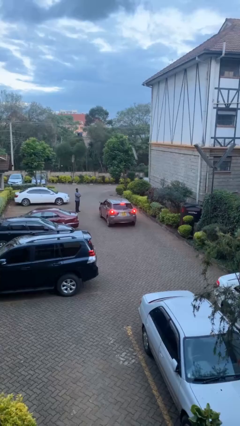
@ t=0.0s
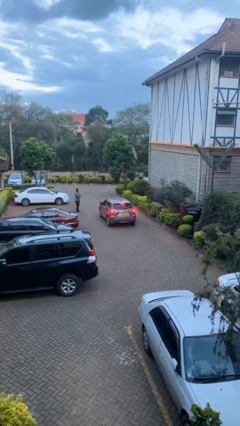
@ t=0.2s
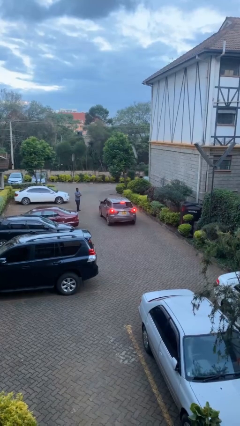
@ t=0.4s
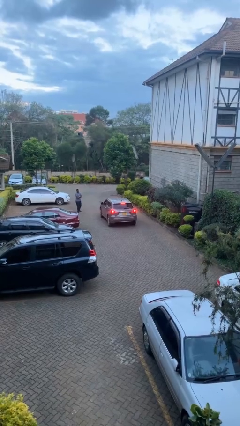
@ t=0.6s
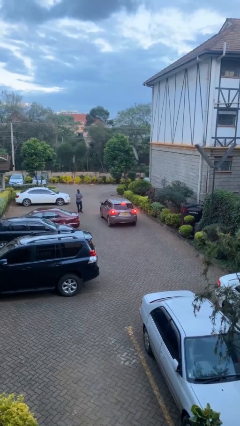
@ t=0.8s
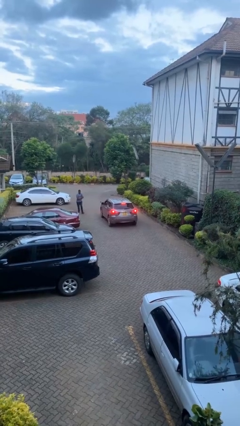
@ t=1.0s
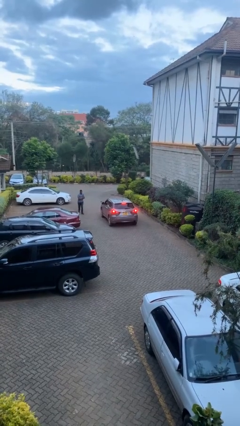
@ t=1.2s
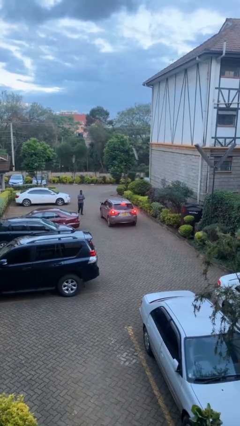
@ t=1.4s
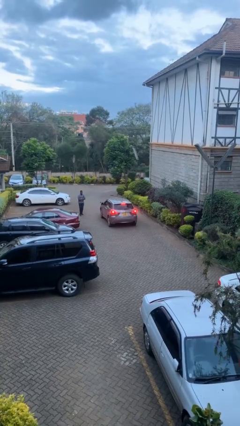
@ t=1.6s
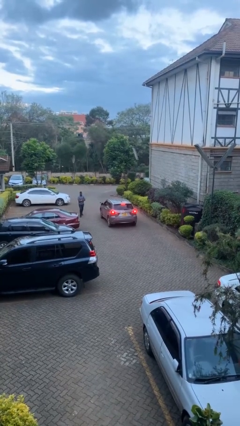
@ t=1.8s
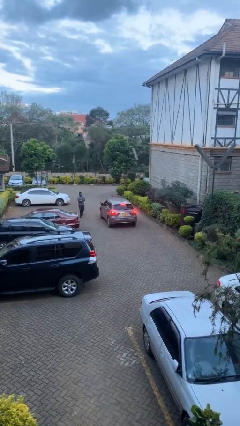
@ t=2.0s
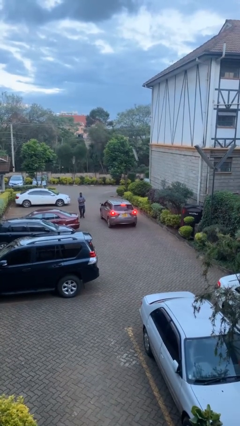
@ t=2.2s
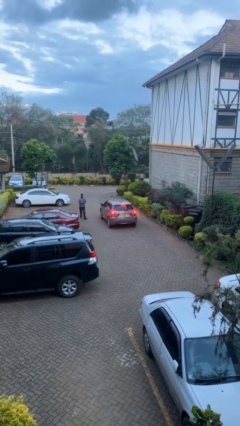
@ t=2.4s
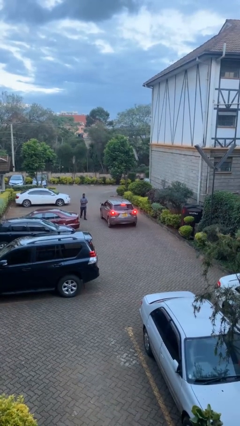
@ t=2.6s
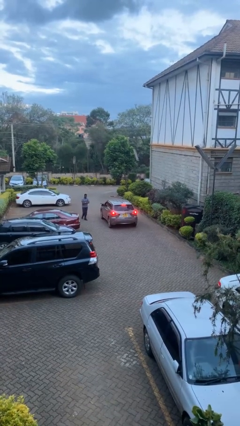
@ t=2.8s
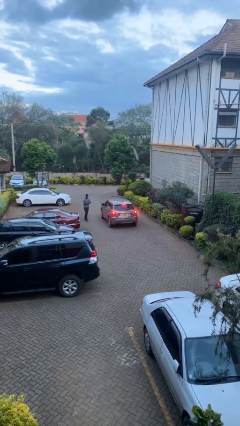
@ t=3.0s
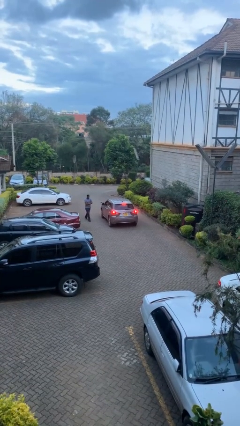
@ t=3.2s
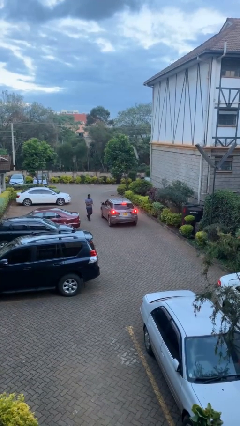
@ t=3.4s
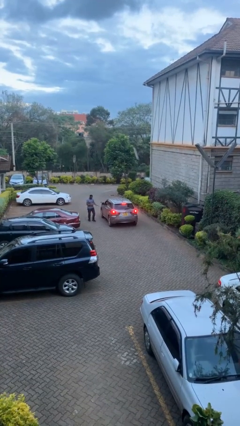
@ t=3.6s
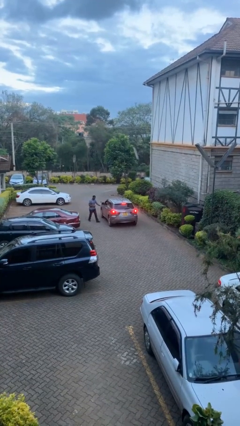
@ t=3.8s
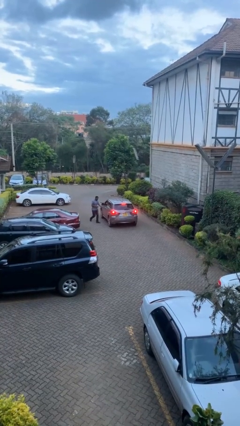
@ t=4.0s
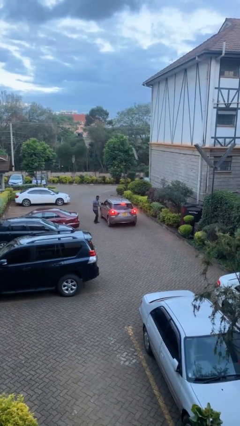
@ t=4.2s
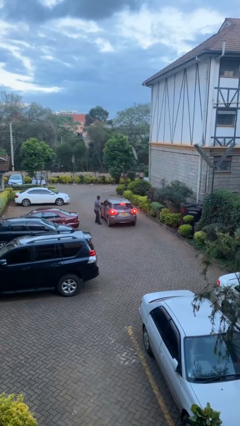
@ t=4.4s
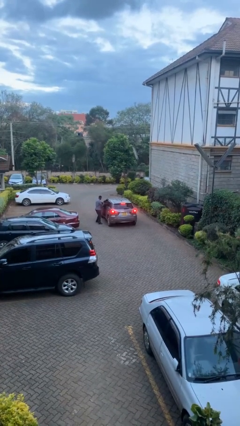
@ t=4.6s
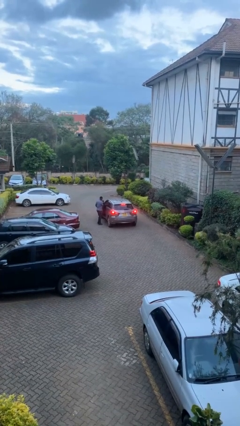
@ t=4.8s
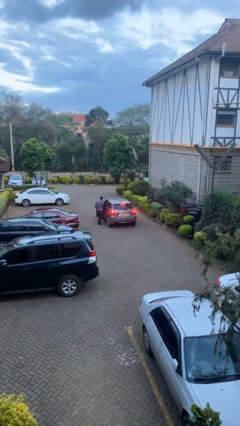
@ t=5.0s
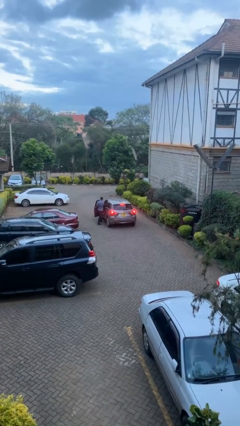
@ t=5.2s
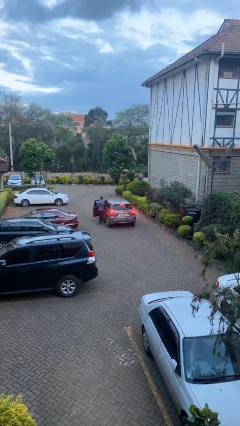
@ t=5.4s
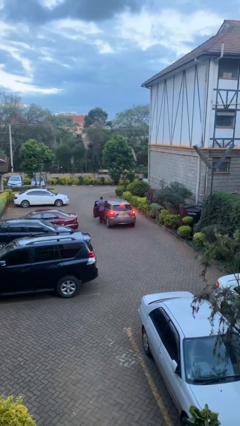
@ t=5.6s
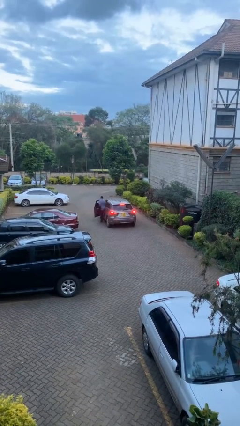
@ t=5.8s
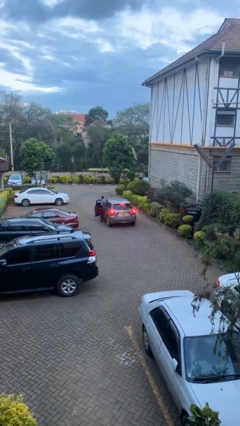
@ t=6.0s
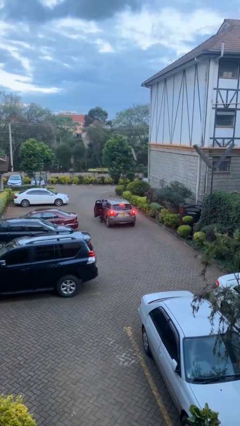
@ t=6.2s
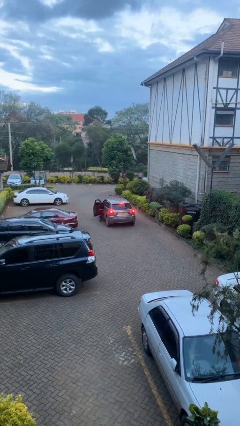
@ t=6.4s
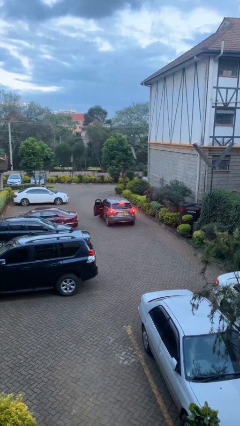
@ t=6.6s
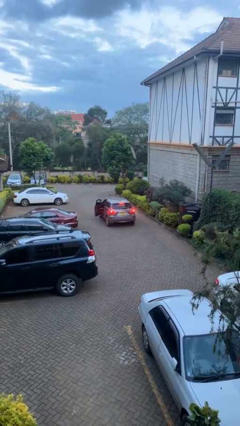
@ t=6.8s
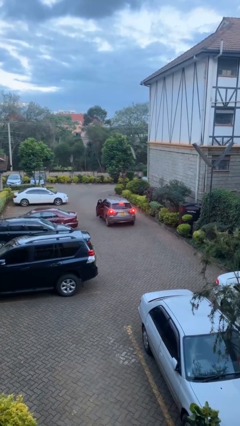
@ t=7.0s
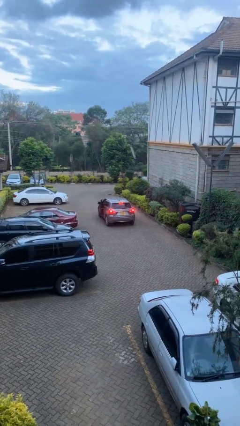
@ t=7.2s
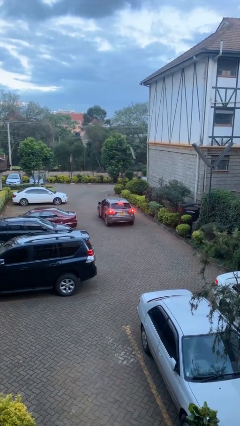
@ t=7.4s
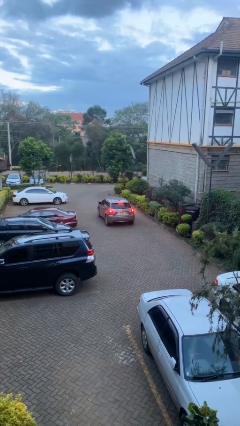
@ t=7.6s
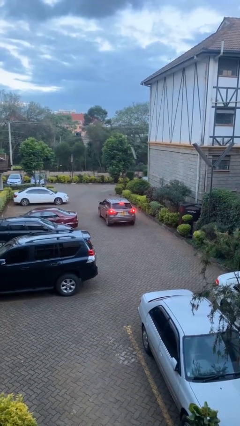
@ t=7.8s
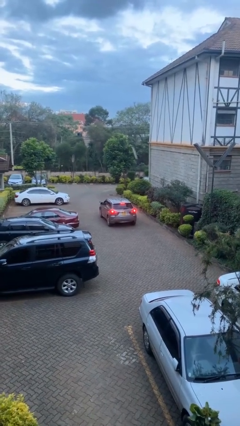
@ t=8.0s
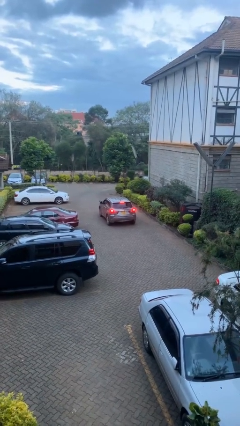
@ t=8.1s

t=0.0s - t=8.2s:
car picks up person

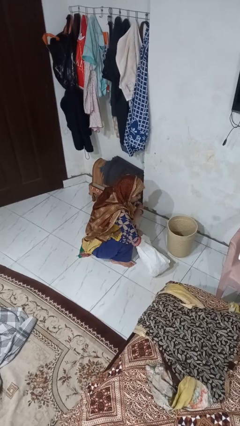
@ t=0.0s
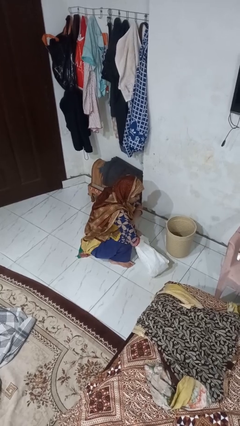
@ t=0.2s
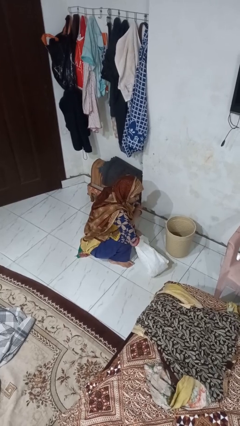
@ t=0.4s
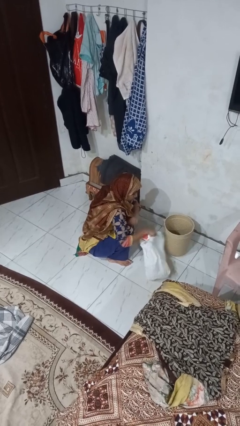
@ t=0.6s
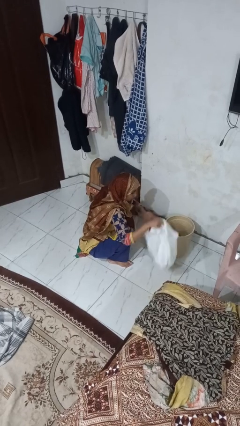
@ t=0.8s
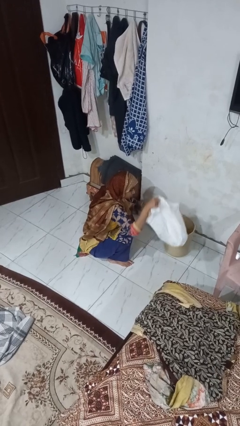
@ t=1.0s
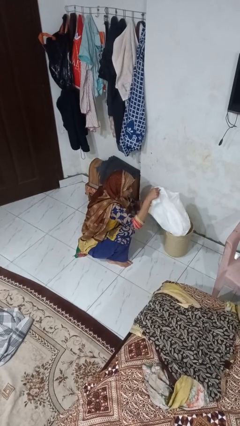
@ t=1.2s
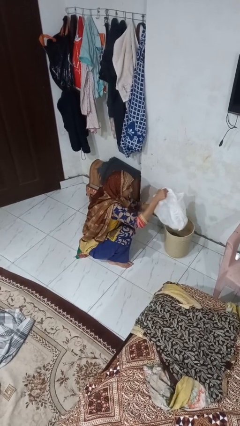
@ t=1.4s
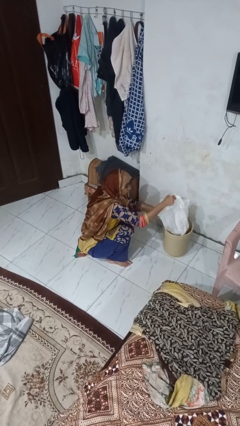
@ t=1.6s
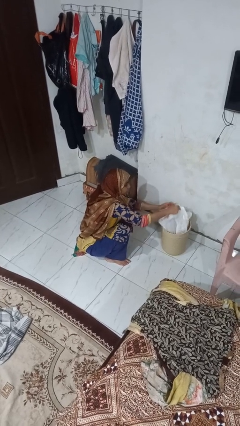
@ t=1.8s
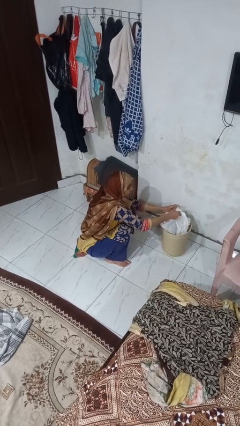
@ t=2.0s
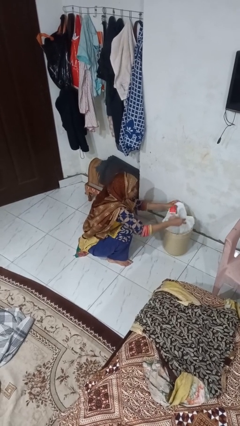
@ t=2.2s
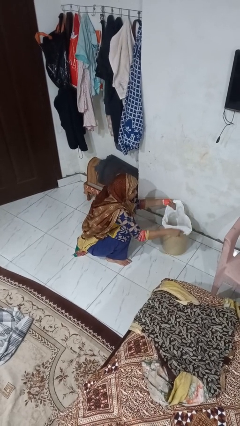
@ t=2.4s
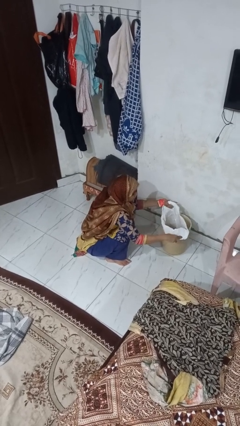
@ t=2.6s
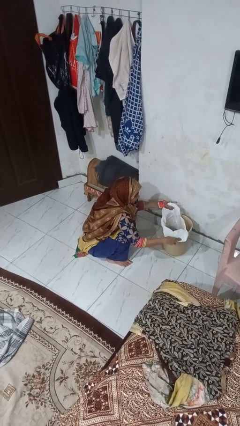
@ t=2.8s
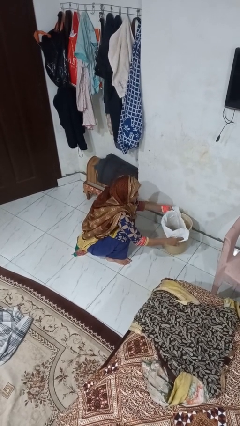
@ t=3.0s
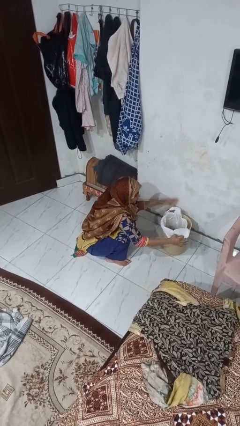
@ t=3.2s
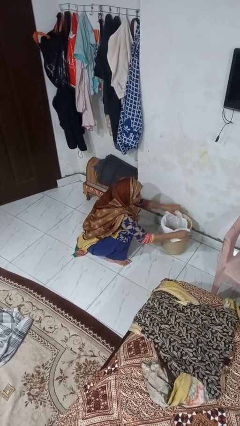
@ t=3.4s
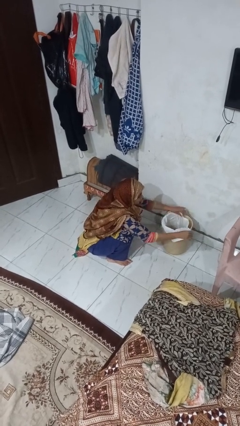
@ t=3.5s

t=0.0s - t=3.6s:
person inserts trashbag into trashcan

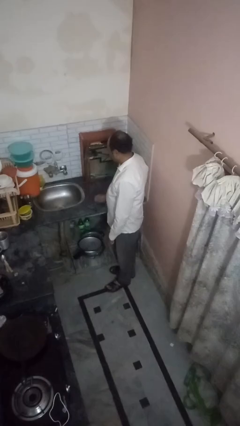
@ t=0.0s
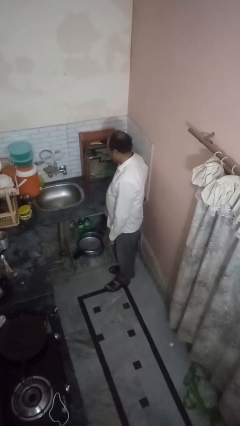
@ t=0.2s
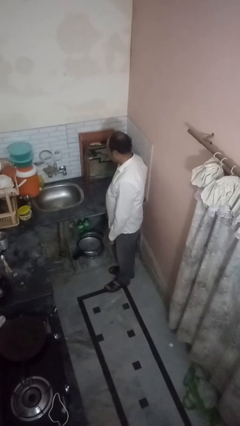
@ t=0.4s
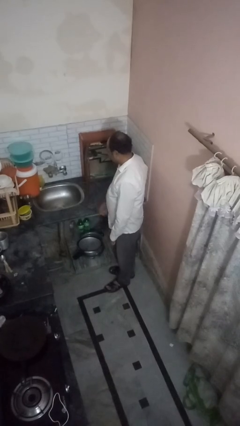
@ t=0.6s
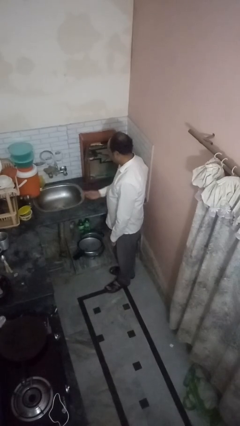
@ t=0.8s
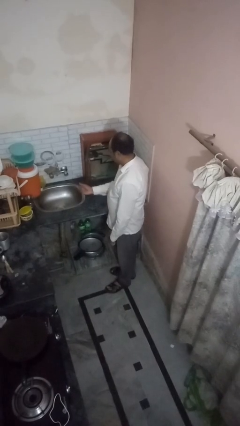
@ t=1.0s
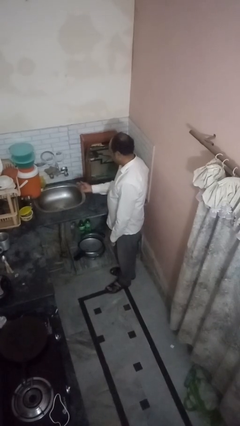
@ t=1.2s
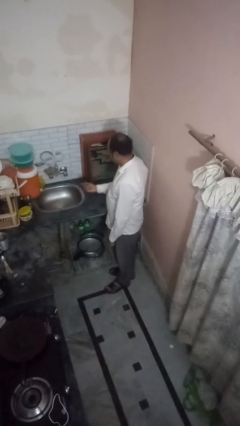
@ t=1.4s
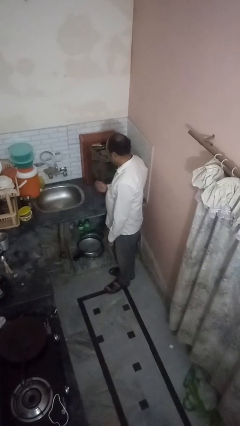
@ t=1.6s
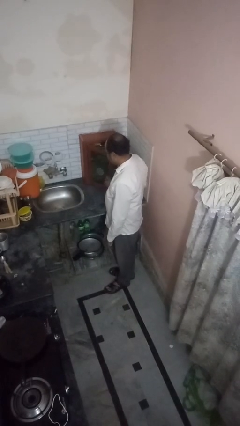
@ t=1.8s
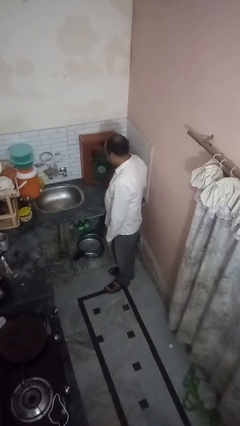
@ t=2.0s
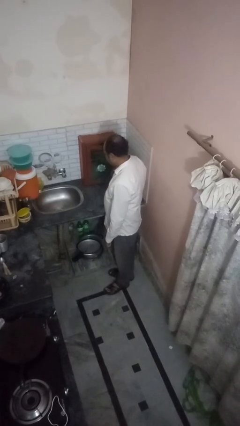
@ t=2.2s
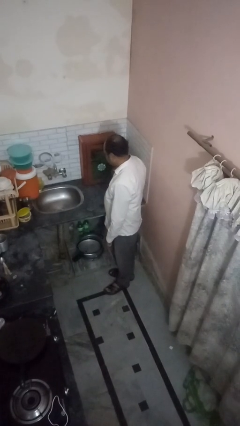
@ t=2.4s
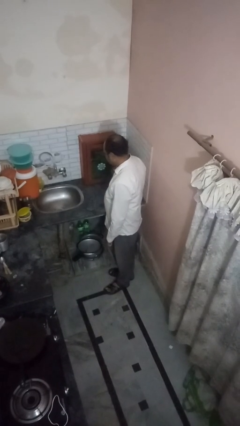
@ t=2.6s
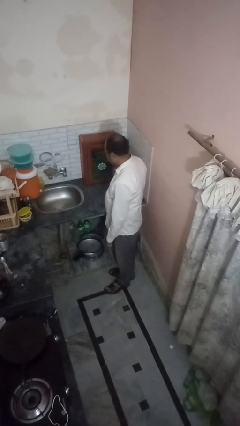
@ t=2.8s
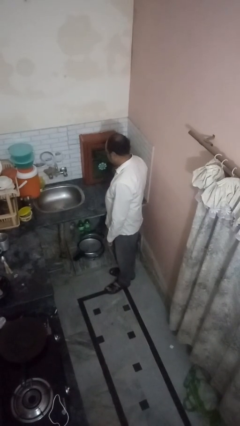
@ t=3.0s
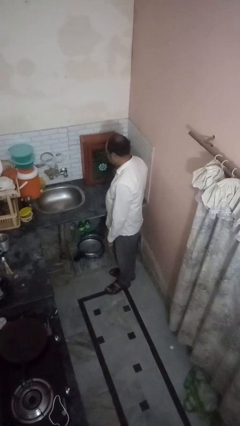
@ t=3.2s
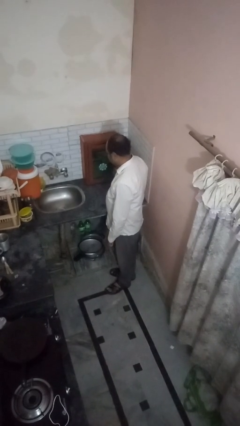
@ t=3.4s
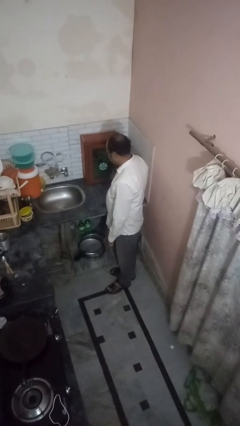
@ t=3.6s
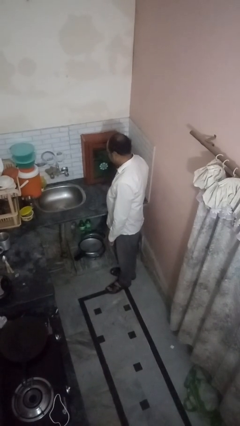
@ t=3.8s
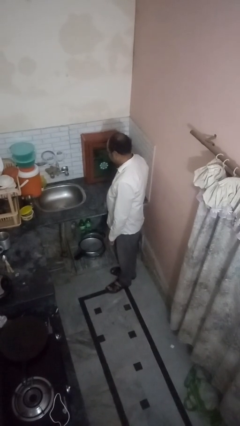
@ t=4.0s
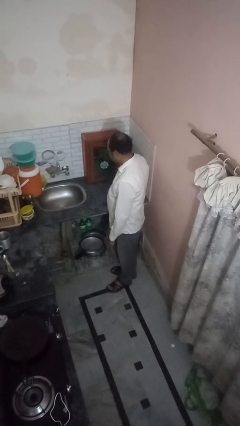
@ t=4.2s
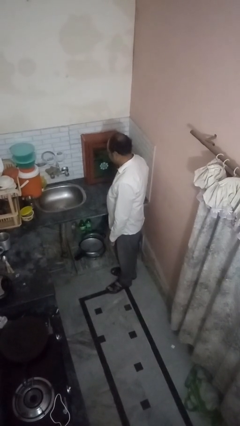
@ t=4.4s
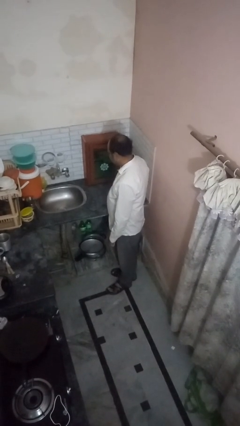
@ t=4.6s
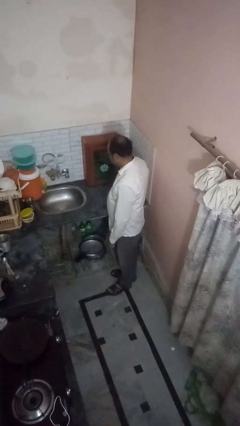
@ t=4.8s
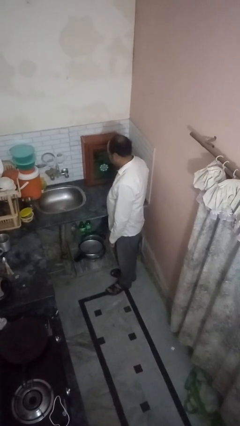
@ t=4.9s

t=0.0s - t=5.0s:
person closes kitchen drawer

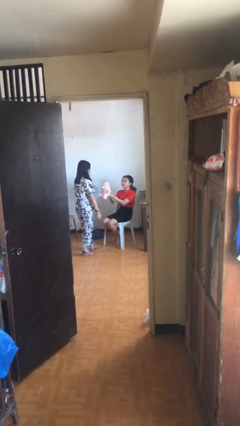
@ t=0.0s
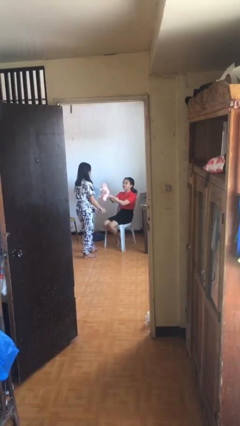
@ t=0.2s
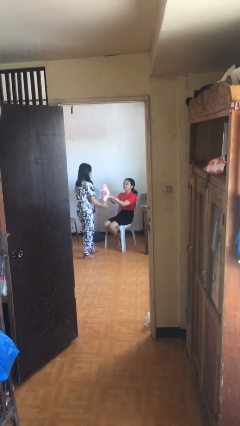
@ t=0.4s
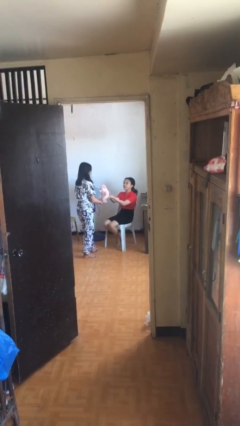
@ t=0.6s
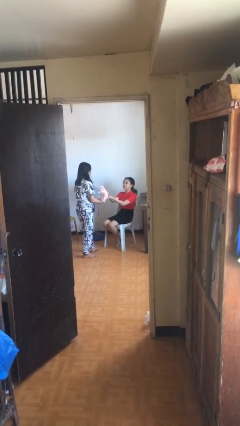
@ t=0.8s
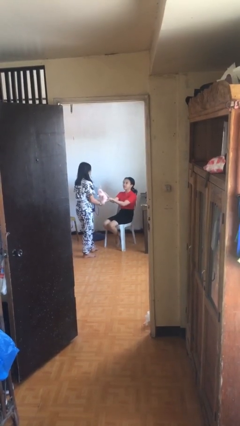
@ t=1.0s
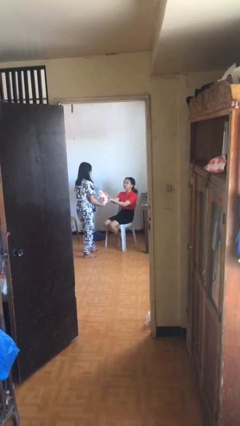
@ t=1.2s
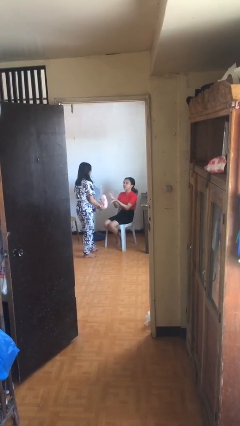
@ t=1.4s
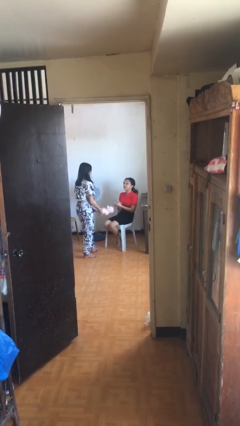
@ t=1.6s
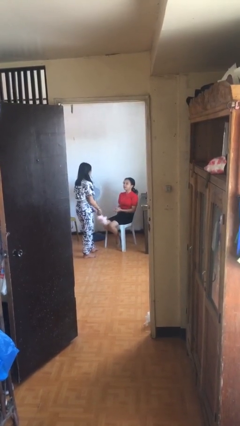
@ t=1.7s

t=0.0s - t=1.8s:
person transfers object to person
